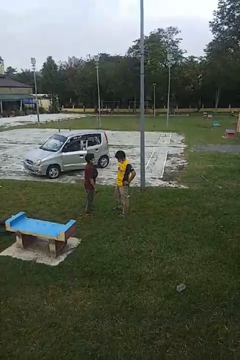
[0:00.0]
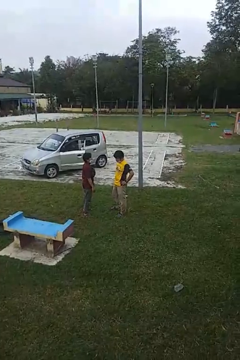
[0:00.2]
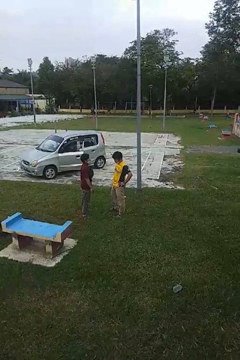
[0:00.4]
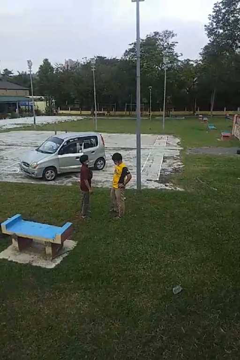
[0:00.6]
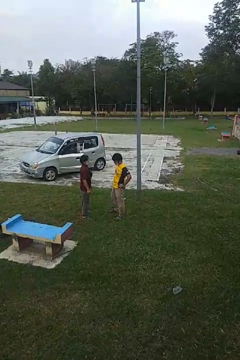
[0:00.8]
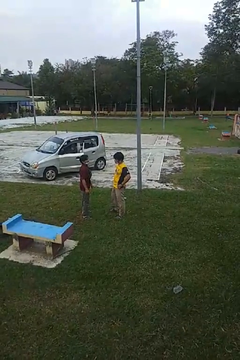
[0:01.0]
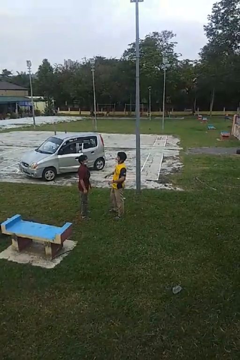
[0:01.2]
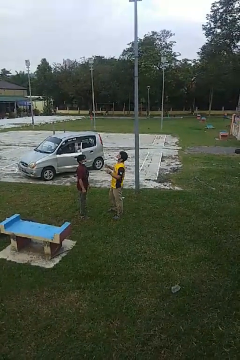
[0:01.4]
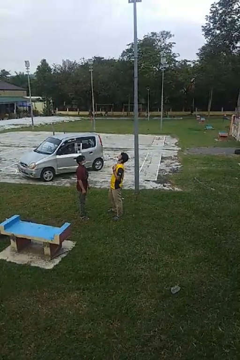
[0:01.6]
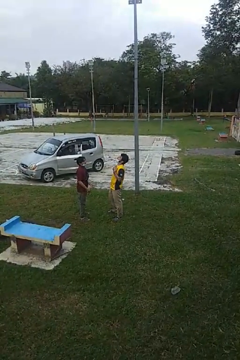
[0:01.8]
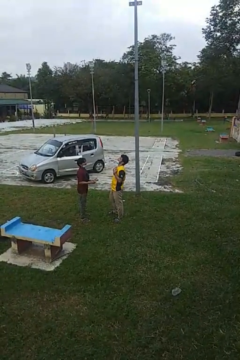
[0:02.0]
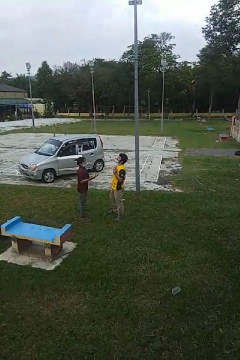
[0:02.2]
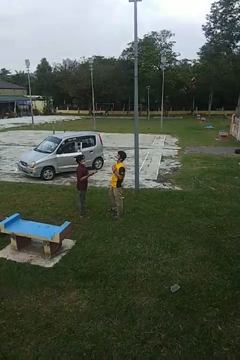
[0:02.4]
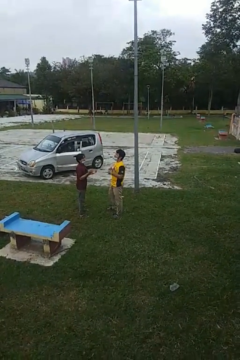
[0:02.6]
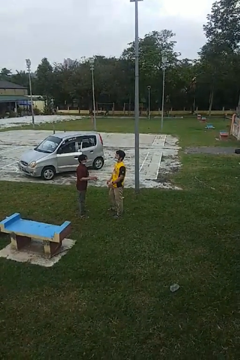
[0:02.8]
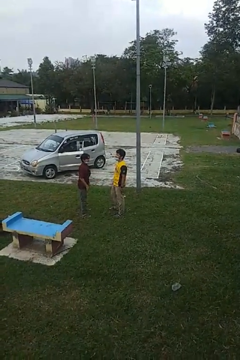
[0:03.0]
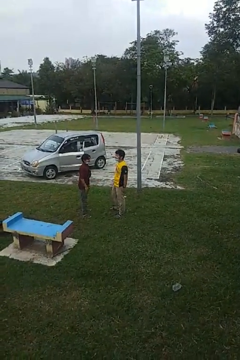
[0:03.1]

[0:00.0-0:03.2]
person laughs with person

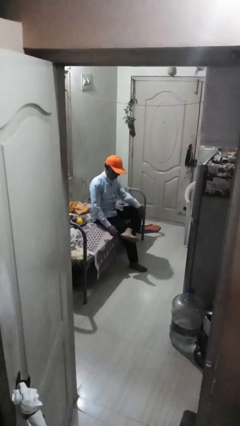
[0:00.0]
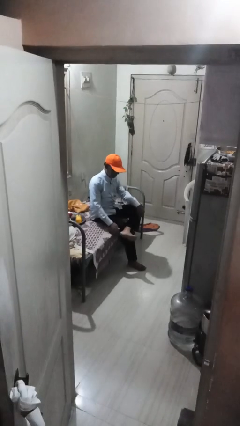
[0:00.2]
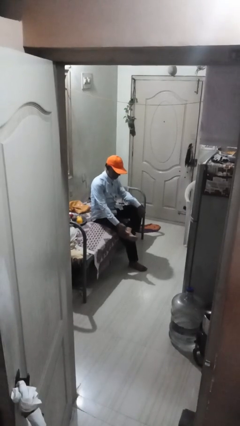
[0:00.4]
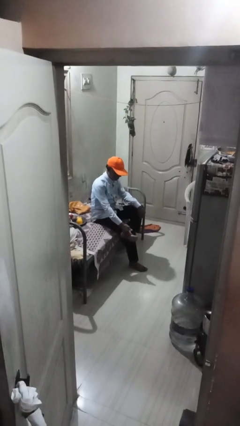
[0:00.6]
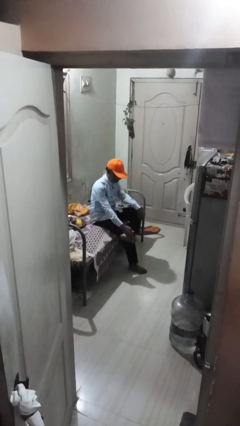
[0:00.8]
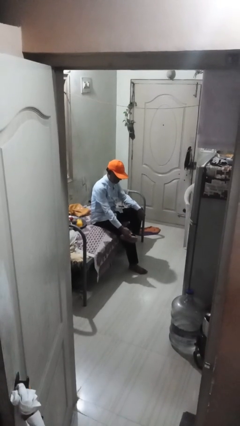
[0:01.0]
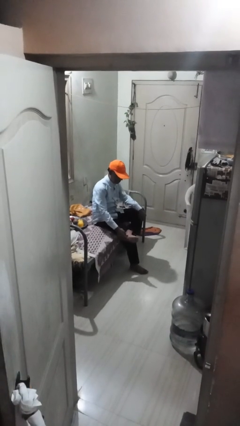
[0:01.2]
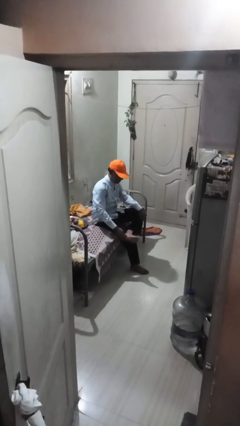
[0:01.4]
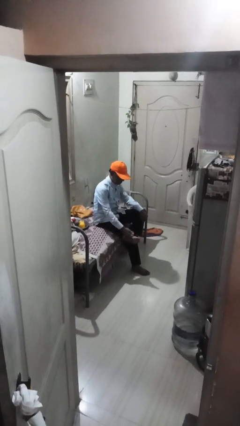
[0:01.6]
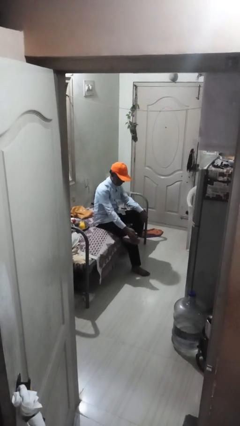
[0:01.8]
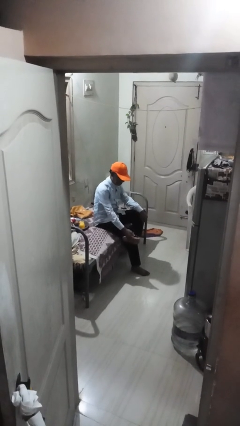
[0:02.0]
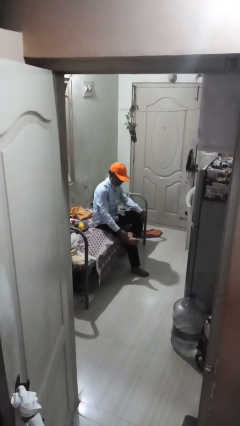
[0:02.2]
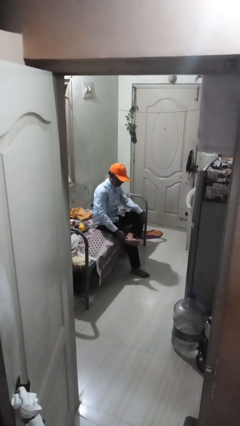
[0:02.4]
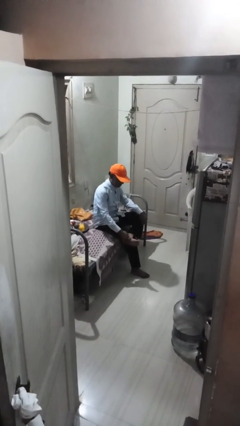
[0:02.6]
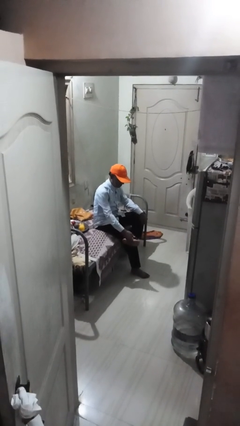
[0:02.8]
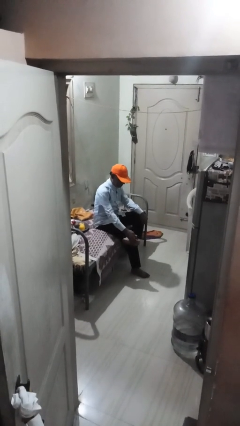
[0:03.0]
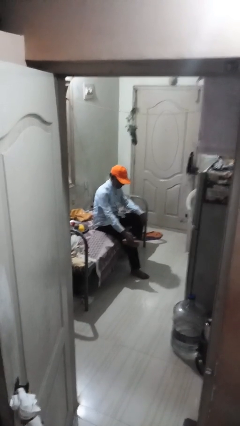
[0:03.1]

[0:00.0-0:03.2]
person rubs foot

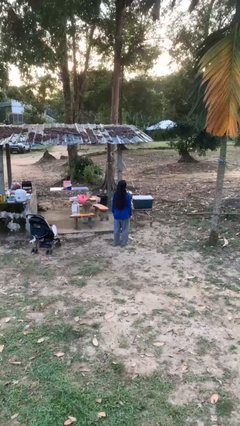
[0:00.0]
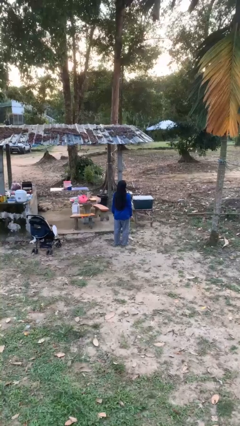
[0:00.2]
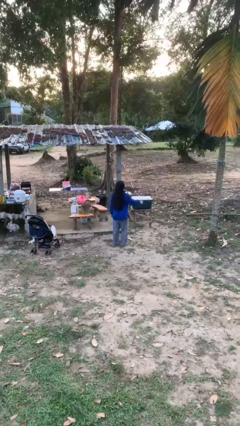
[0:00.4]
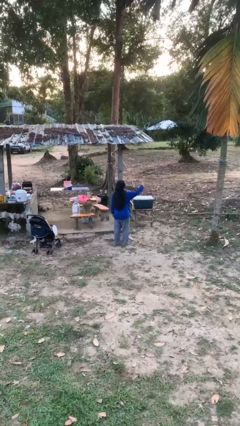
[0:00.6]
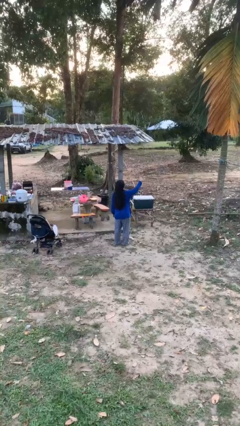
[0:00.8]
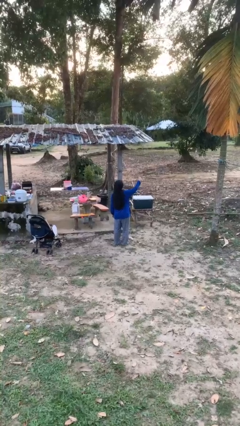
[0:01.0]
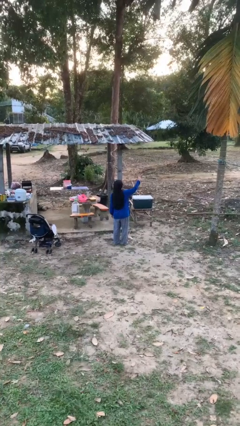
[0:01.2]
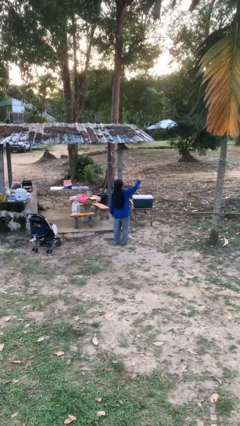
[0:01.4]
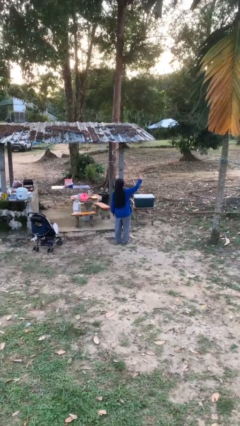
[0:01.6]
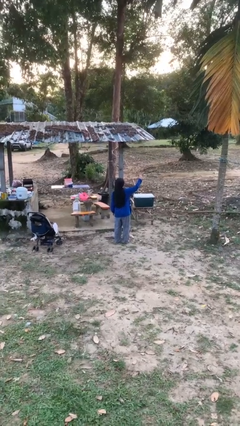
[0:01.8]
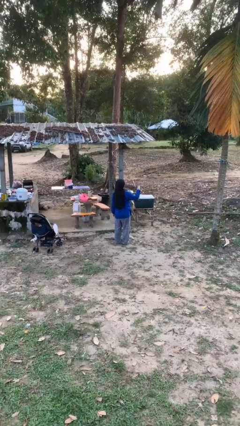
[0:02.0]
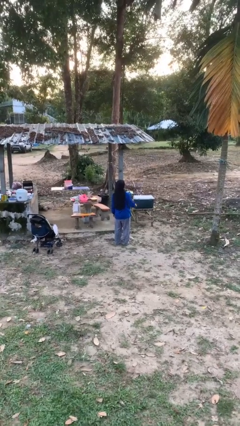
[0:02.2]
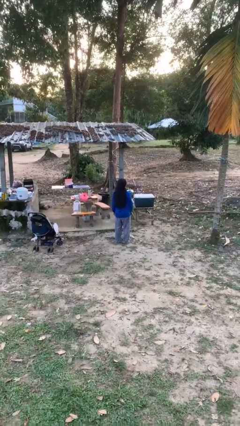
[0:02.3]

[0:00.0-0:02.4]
person gestures number three

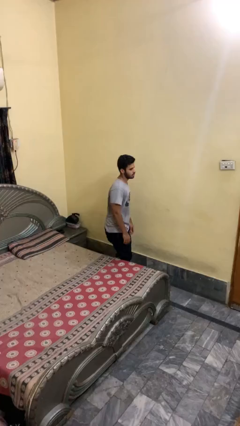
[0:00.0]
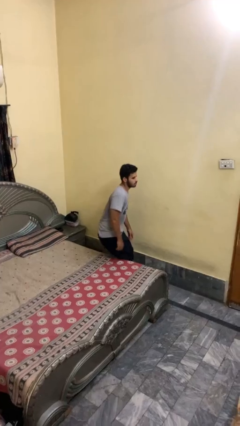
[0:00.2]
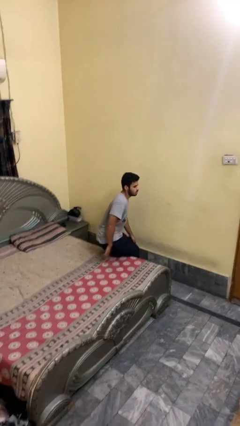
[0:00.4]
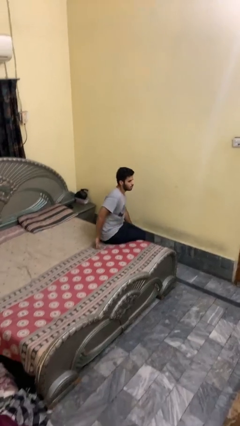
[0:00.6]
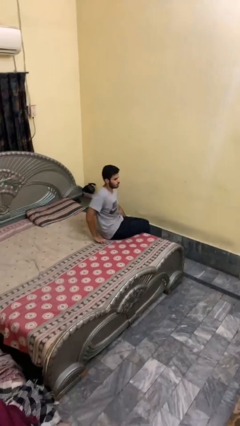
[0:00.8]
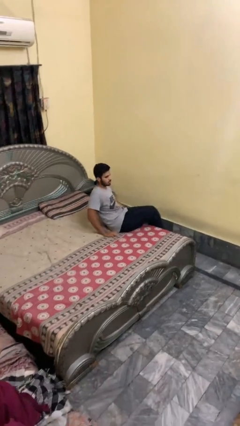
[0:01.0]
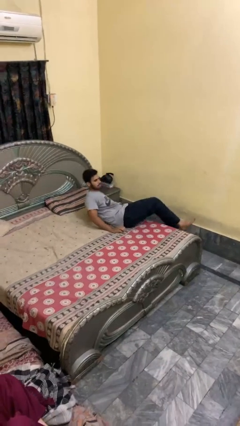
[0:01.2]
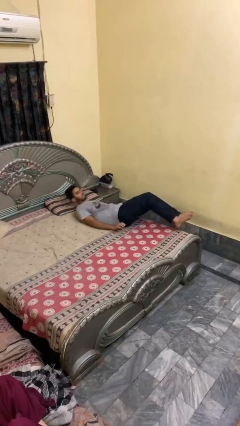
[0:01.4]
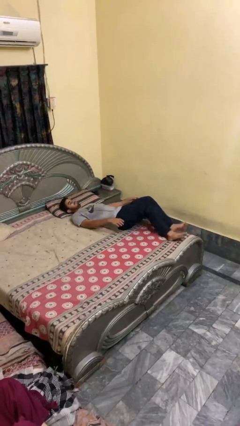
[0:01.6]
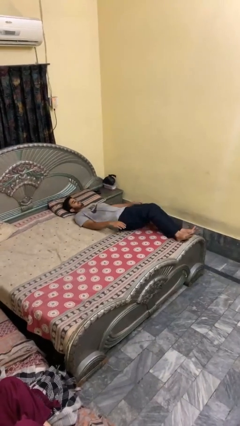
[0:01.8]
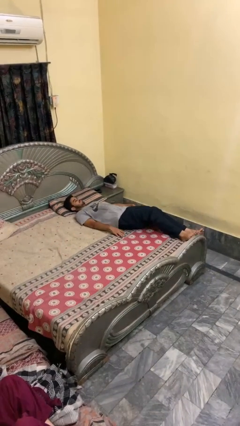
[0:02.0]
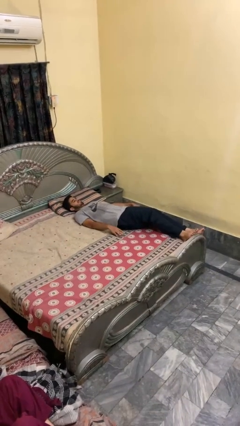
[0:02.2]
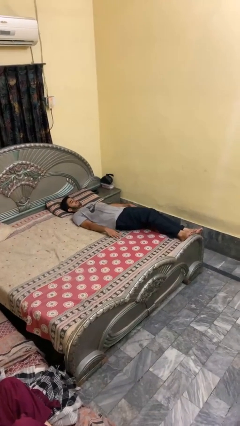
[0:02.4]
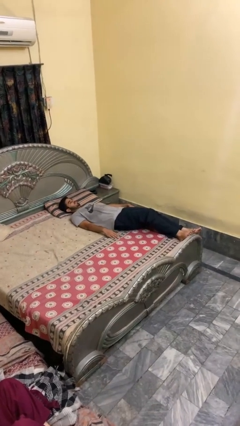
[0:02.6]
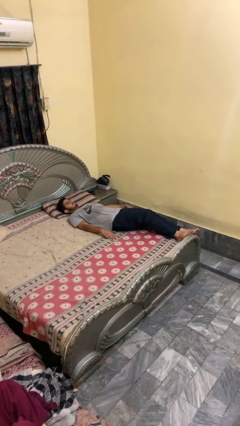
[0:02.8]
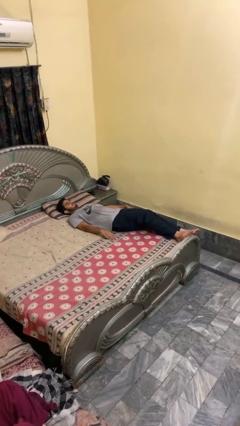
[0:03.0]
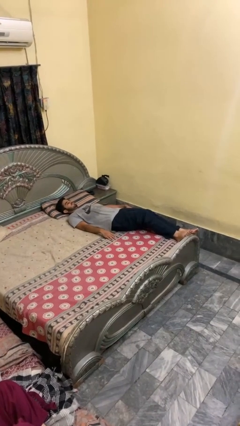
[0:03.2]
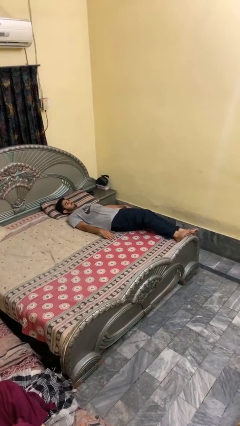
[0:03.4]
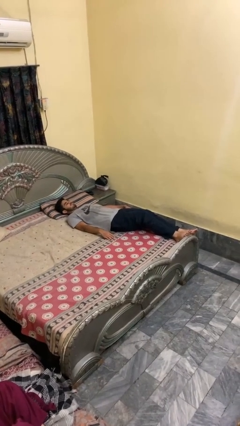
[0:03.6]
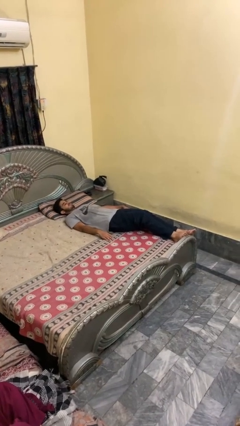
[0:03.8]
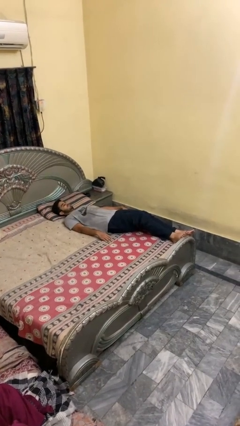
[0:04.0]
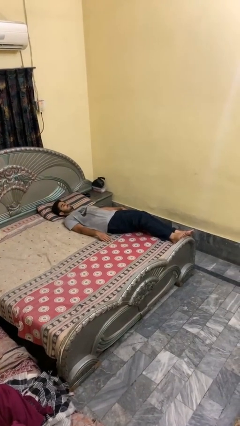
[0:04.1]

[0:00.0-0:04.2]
person lies down on bed

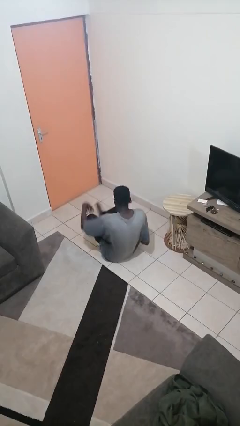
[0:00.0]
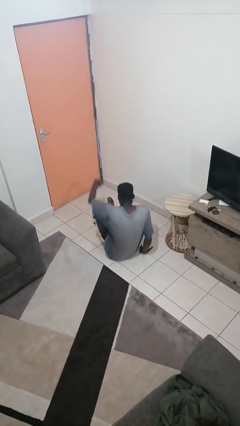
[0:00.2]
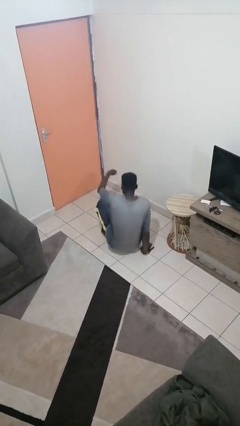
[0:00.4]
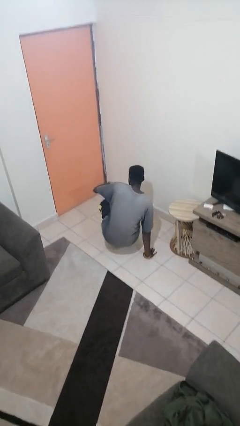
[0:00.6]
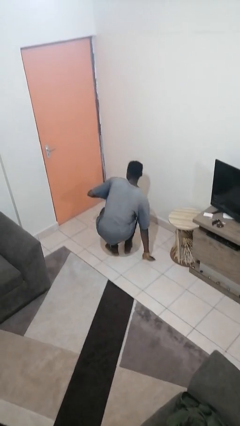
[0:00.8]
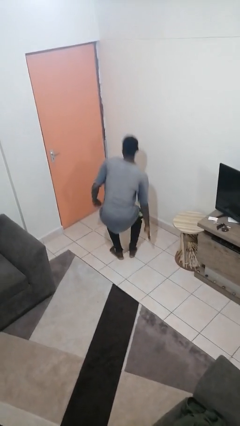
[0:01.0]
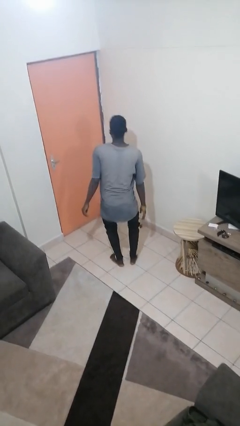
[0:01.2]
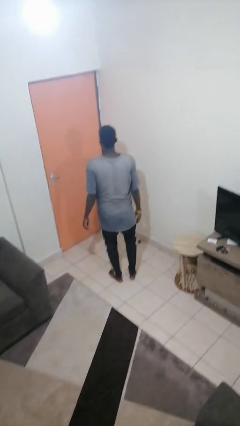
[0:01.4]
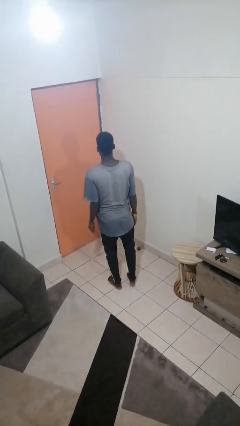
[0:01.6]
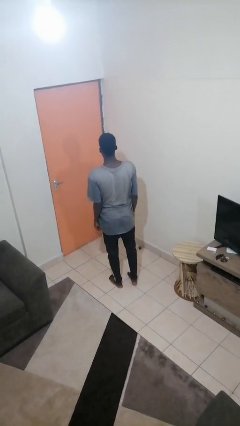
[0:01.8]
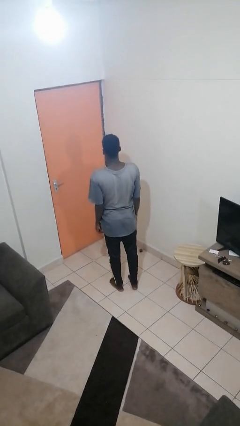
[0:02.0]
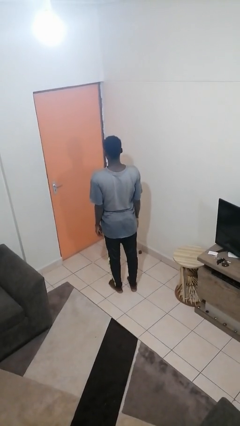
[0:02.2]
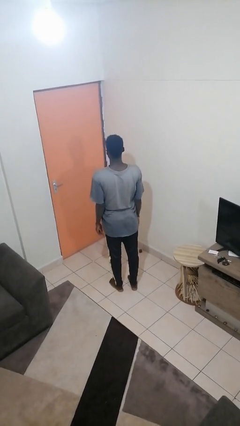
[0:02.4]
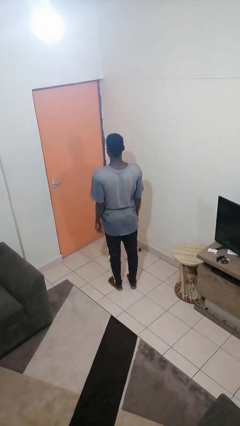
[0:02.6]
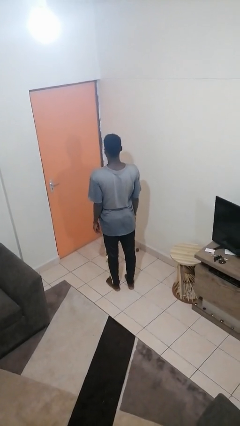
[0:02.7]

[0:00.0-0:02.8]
person stands up from floor

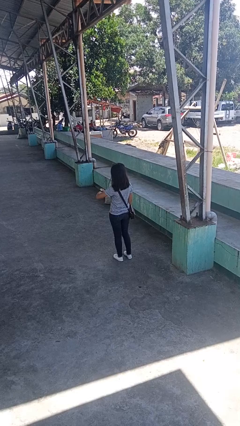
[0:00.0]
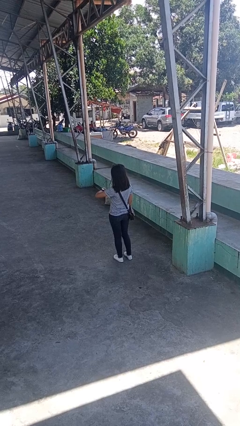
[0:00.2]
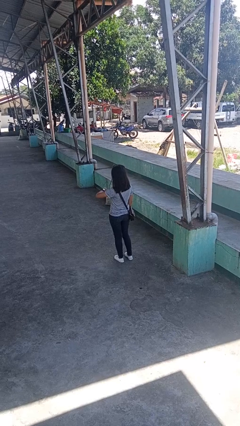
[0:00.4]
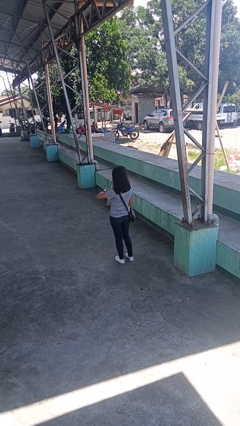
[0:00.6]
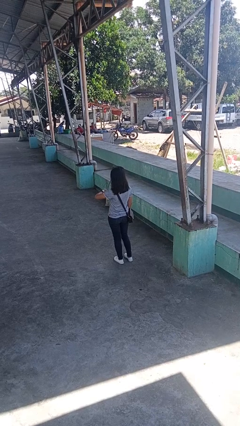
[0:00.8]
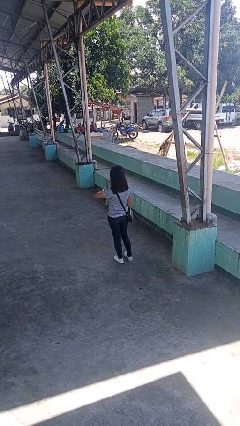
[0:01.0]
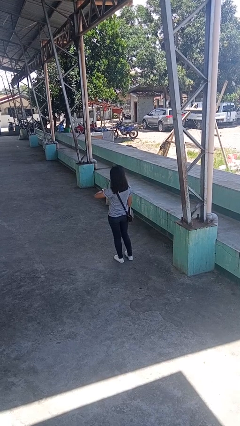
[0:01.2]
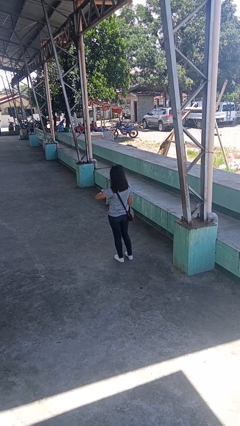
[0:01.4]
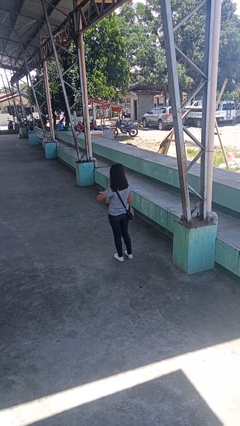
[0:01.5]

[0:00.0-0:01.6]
person looks at wristwatch

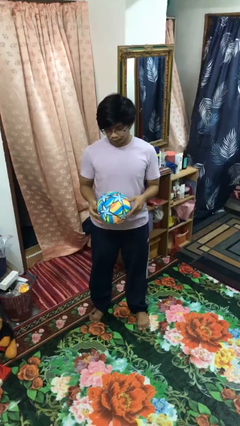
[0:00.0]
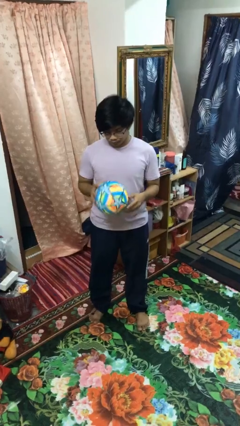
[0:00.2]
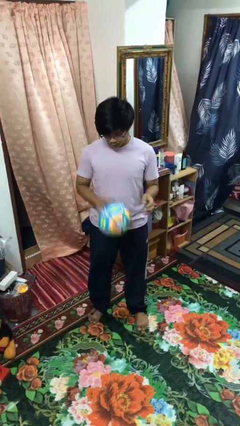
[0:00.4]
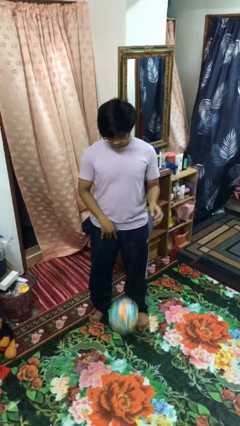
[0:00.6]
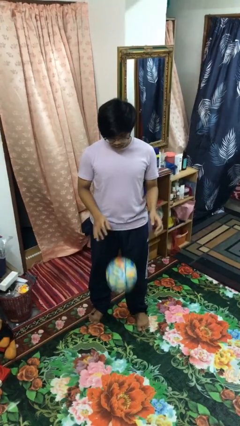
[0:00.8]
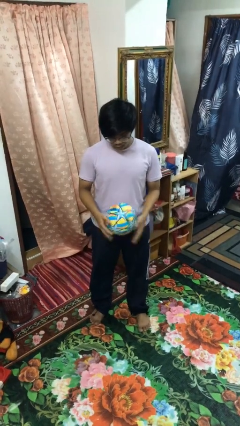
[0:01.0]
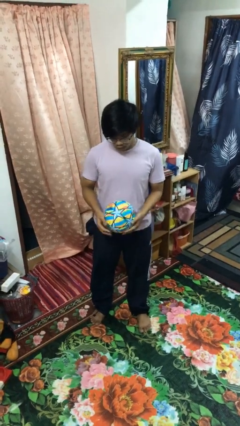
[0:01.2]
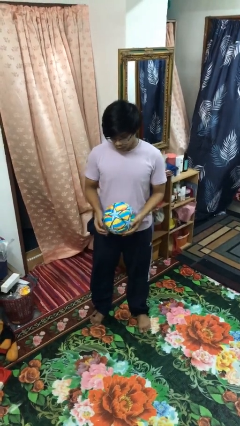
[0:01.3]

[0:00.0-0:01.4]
person bounces ball on floor
